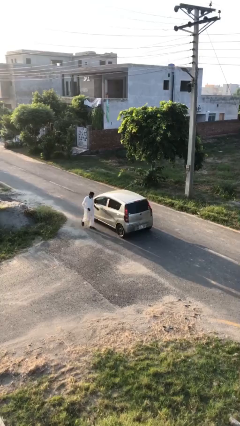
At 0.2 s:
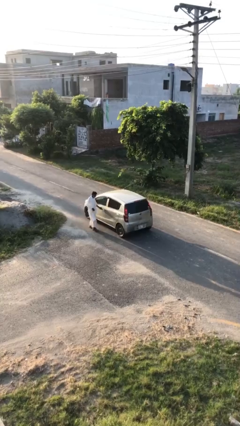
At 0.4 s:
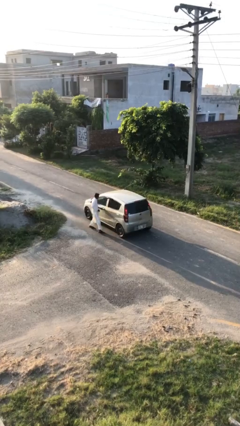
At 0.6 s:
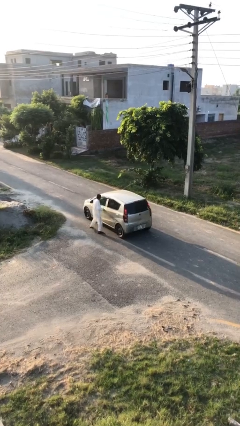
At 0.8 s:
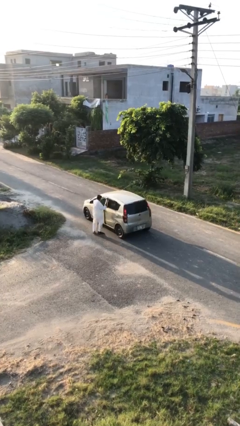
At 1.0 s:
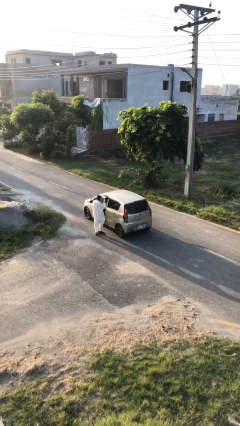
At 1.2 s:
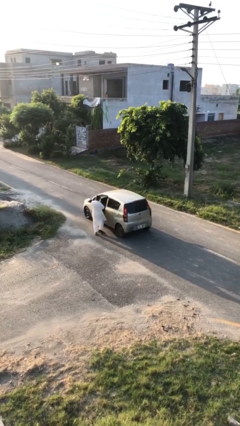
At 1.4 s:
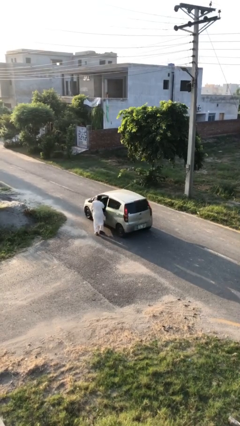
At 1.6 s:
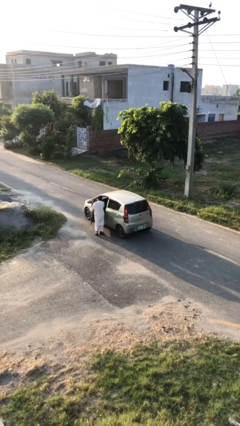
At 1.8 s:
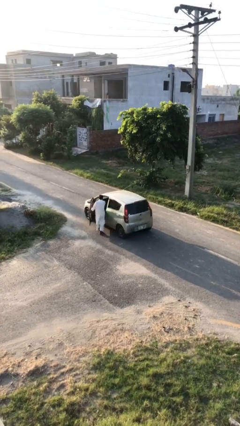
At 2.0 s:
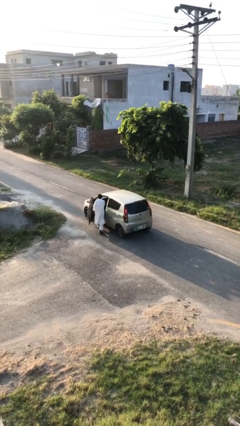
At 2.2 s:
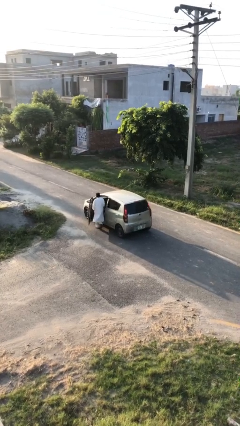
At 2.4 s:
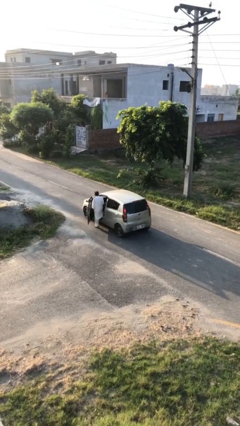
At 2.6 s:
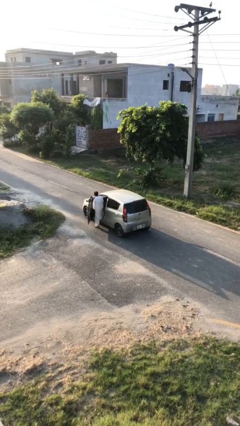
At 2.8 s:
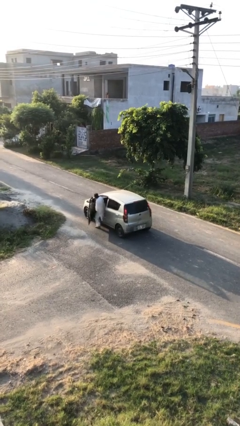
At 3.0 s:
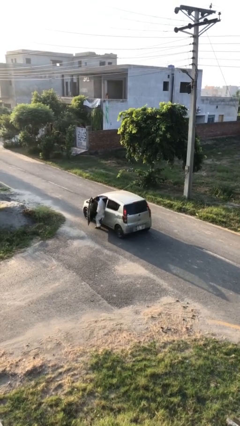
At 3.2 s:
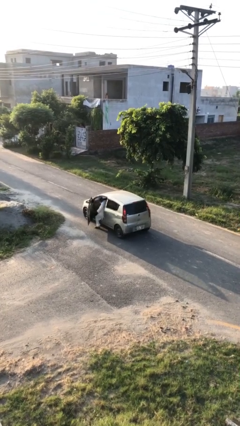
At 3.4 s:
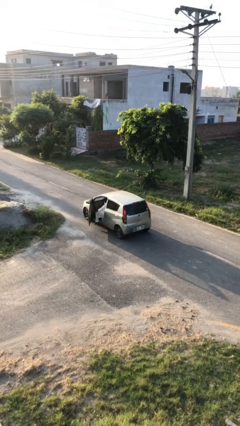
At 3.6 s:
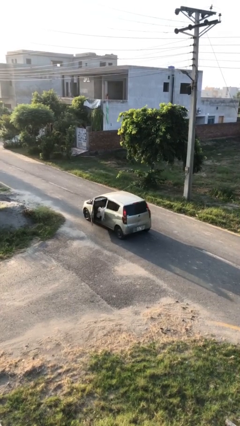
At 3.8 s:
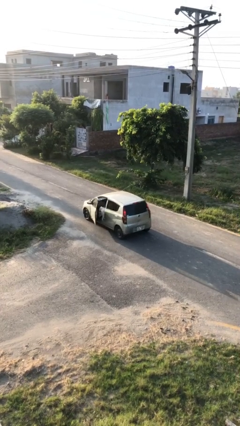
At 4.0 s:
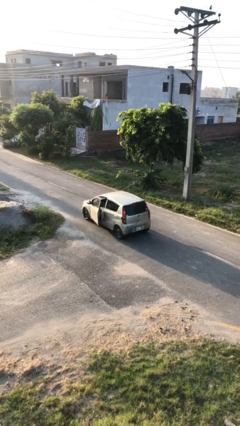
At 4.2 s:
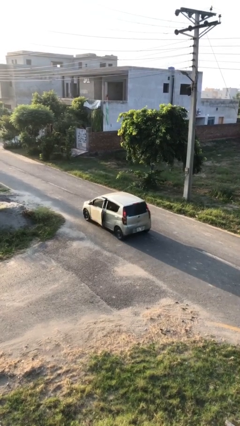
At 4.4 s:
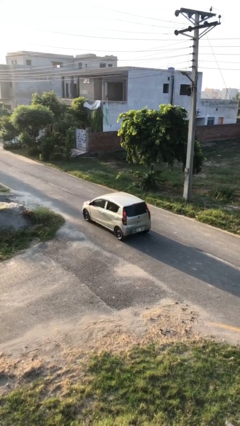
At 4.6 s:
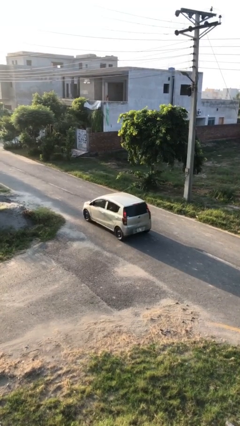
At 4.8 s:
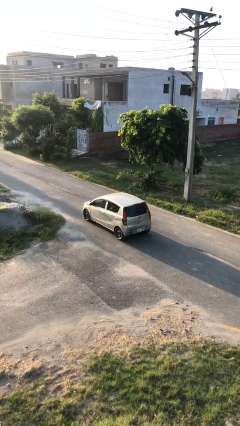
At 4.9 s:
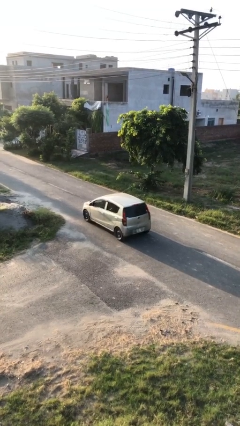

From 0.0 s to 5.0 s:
car picks up person

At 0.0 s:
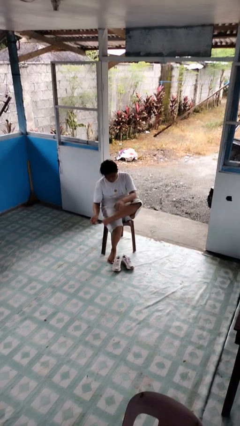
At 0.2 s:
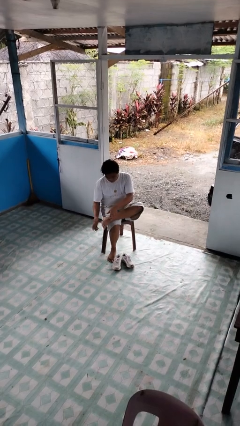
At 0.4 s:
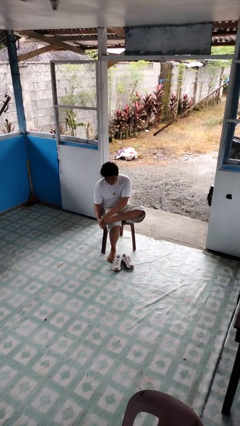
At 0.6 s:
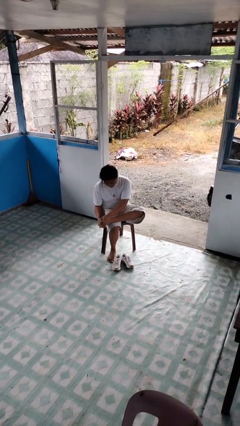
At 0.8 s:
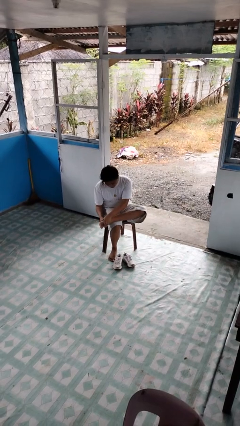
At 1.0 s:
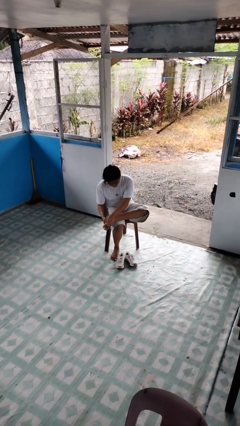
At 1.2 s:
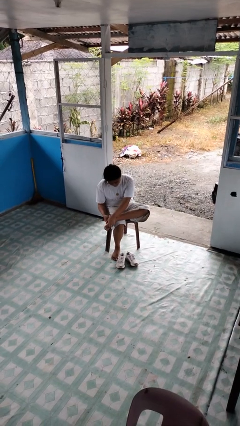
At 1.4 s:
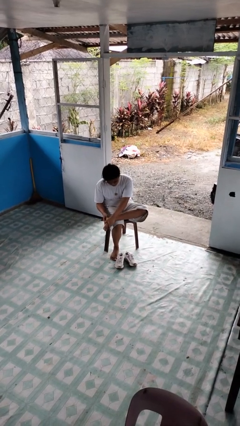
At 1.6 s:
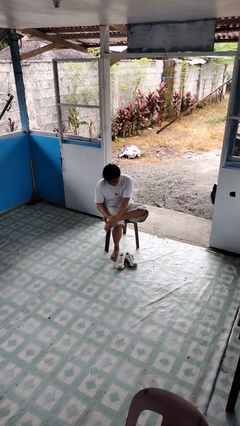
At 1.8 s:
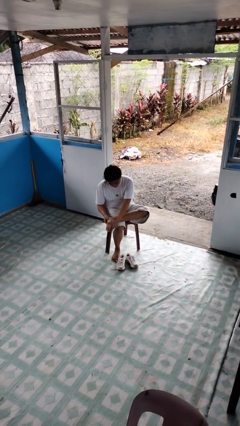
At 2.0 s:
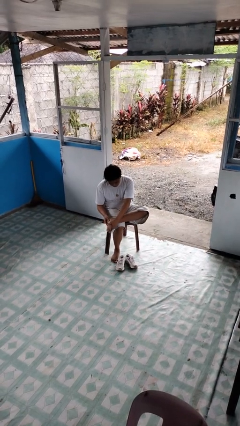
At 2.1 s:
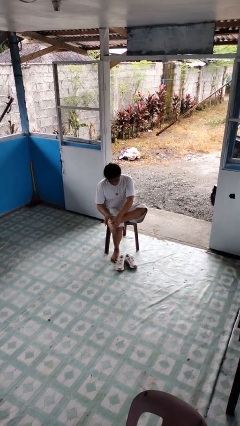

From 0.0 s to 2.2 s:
person rubs foot

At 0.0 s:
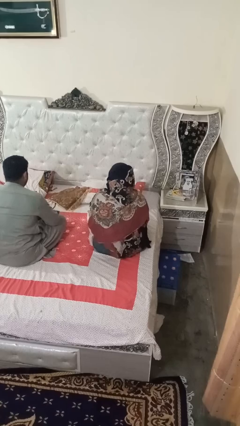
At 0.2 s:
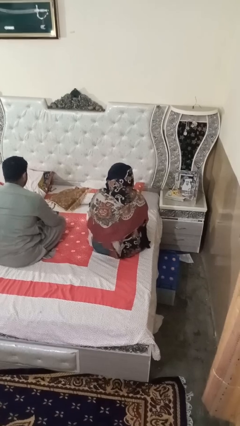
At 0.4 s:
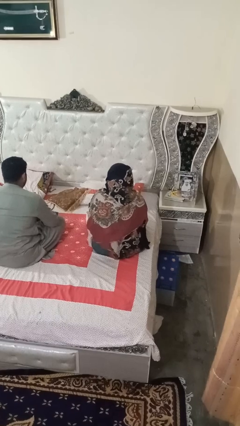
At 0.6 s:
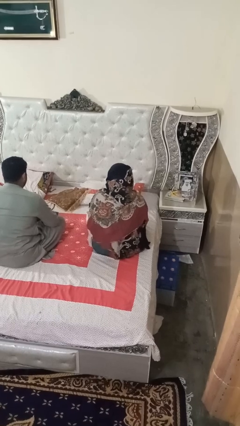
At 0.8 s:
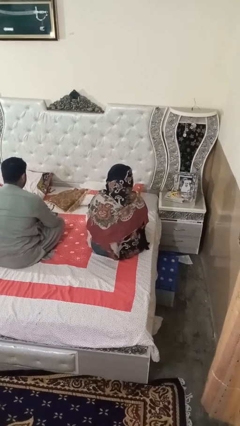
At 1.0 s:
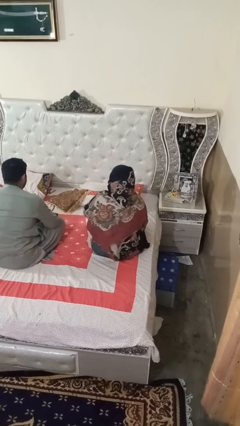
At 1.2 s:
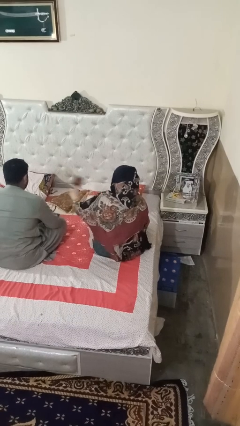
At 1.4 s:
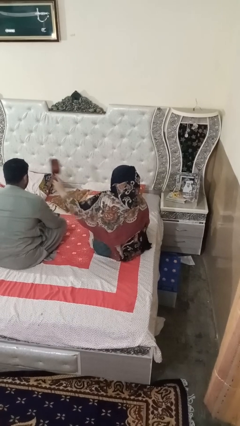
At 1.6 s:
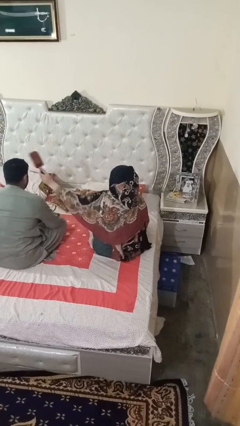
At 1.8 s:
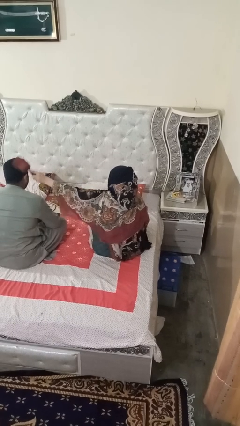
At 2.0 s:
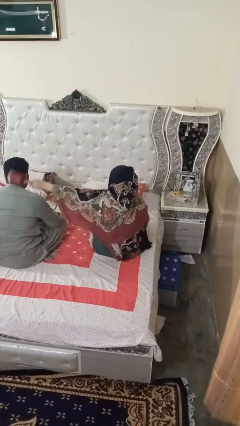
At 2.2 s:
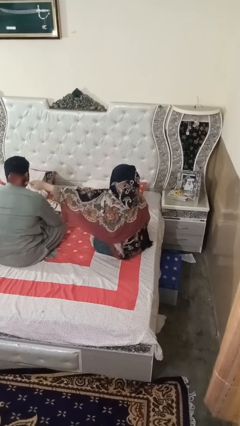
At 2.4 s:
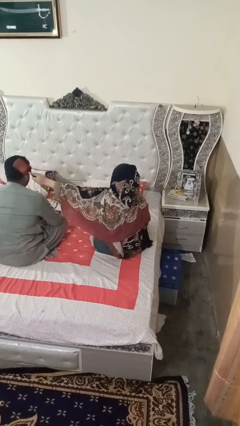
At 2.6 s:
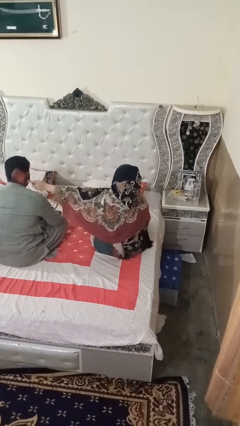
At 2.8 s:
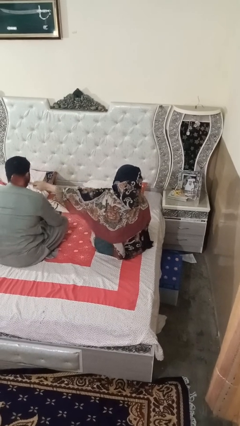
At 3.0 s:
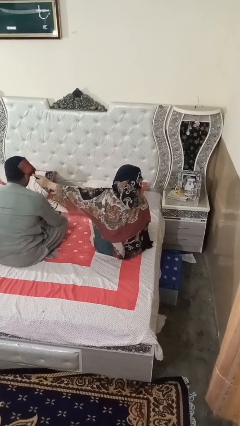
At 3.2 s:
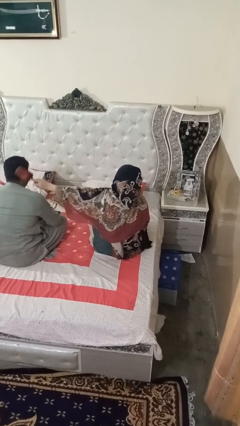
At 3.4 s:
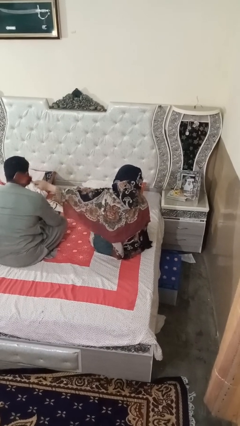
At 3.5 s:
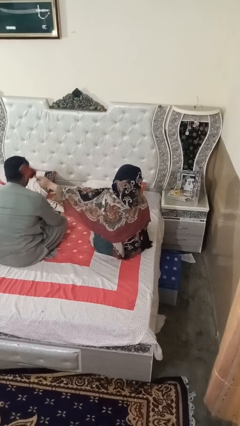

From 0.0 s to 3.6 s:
person brushes hair of person

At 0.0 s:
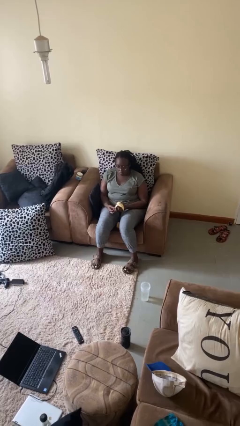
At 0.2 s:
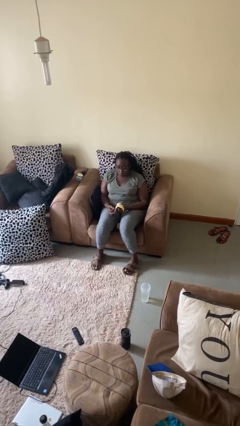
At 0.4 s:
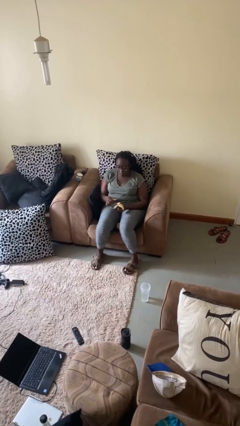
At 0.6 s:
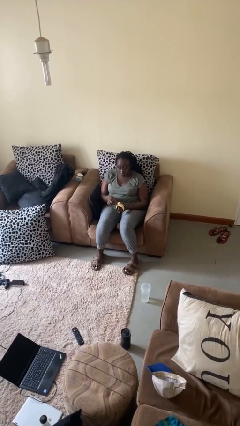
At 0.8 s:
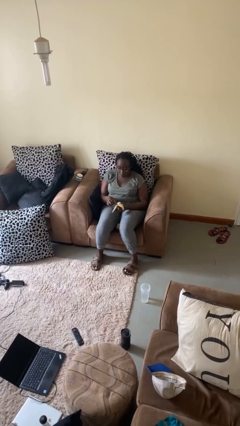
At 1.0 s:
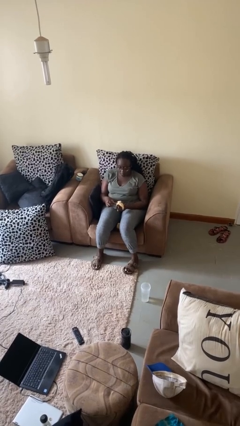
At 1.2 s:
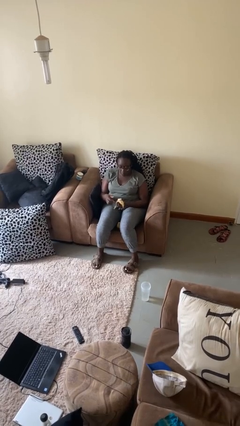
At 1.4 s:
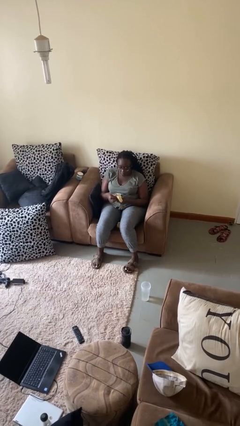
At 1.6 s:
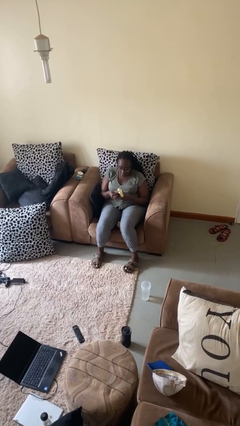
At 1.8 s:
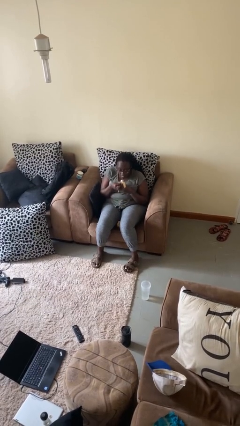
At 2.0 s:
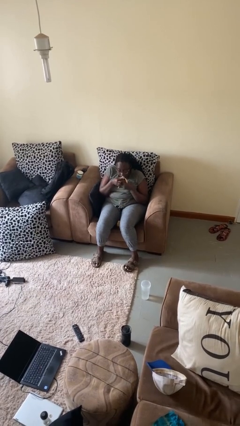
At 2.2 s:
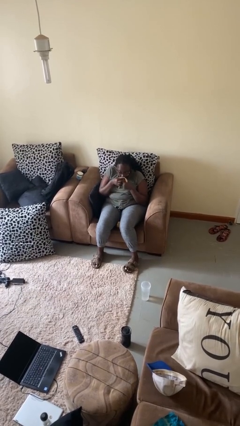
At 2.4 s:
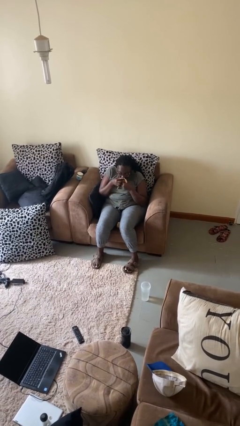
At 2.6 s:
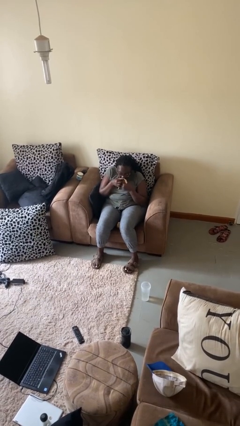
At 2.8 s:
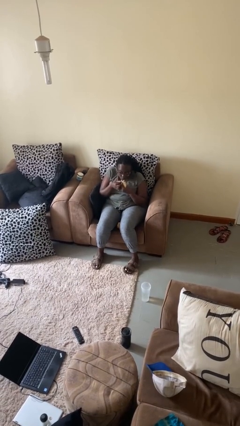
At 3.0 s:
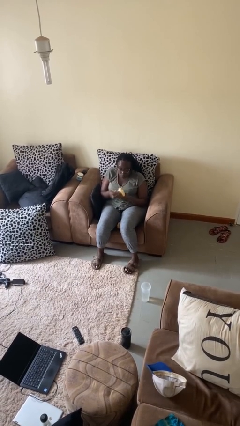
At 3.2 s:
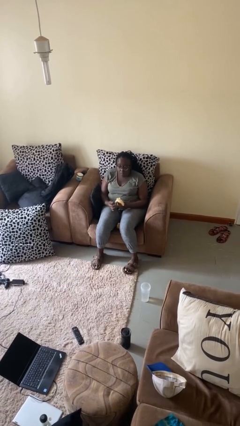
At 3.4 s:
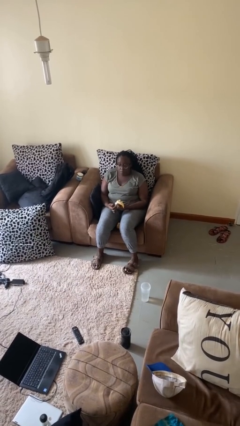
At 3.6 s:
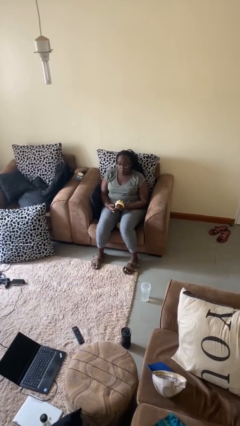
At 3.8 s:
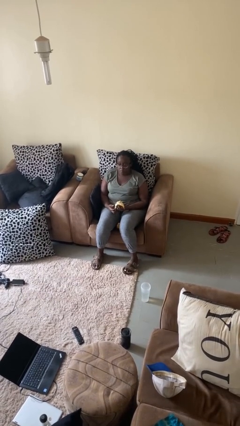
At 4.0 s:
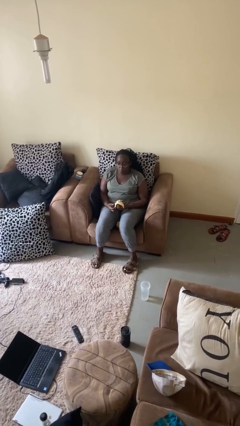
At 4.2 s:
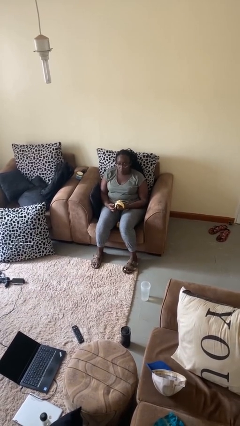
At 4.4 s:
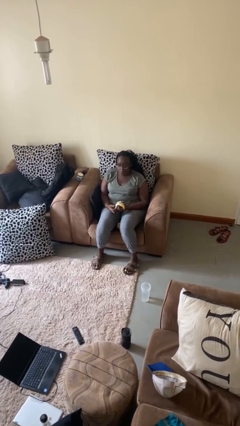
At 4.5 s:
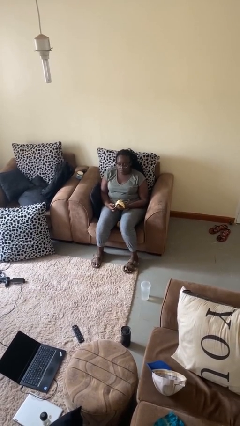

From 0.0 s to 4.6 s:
person eats banana

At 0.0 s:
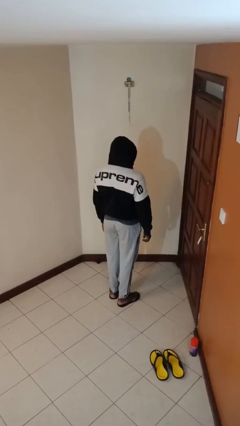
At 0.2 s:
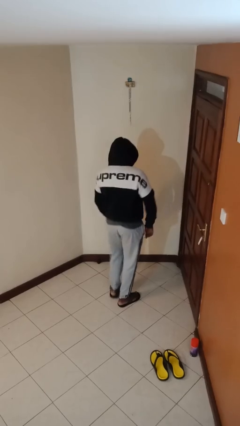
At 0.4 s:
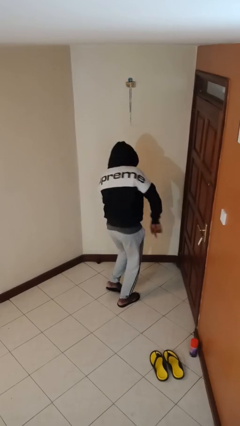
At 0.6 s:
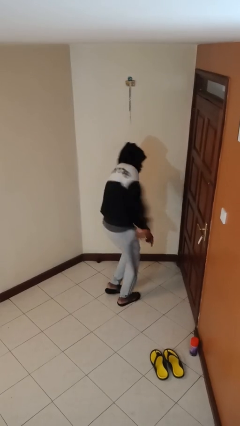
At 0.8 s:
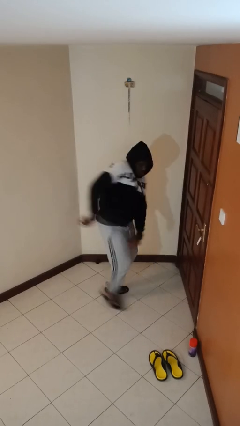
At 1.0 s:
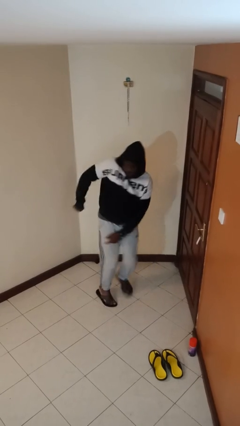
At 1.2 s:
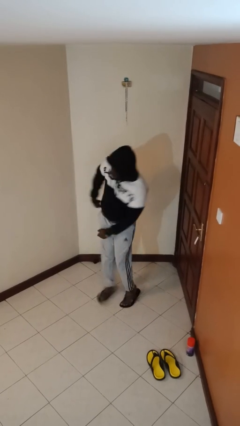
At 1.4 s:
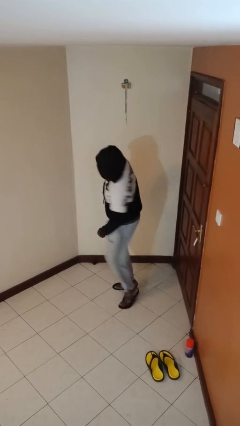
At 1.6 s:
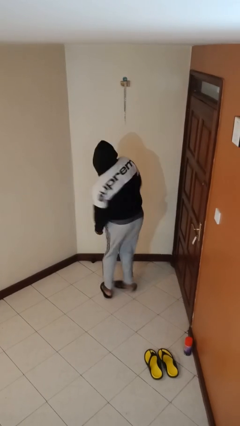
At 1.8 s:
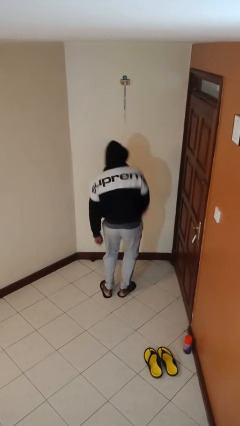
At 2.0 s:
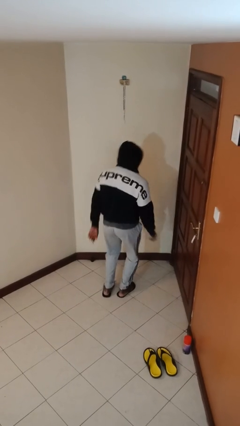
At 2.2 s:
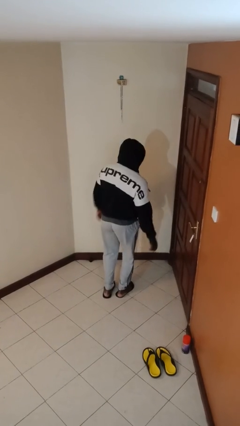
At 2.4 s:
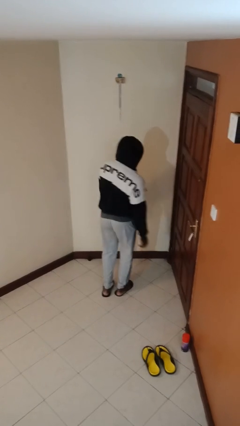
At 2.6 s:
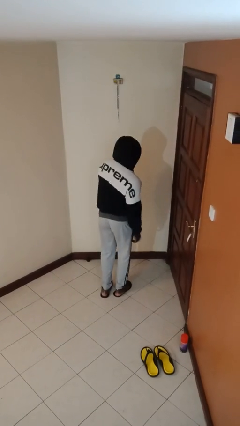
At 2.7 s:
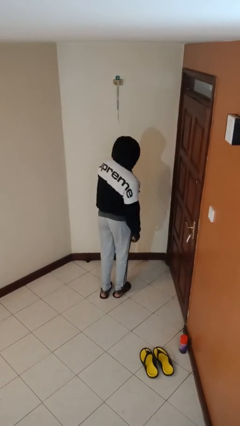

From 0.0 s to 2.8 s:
person twirls
